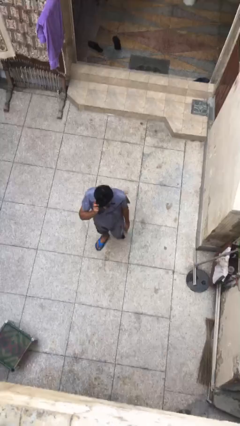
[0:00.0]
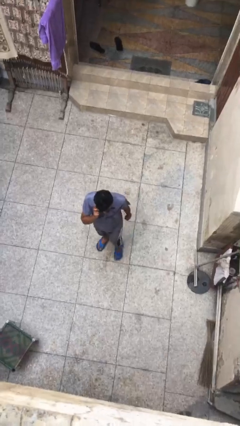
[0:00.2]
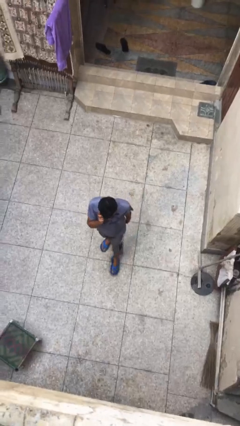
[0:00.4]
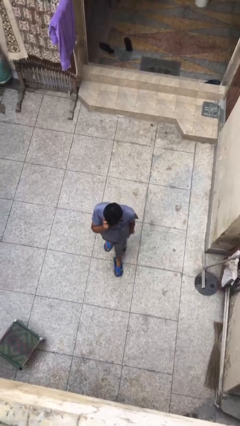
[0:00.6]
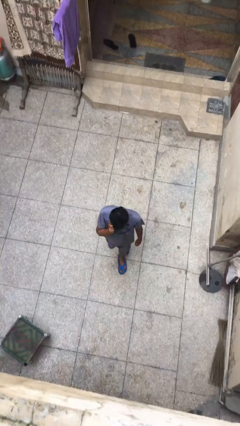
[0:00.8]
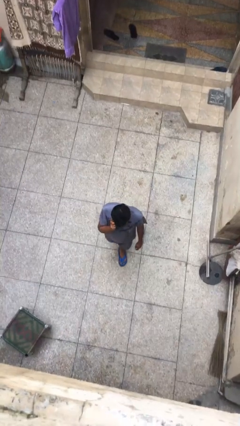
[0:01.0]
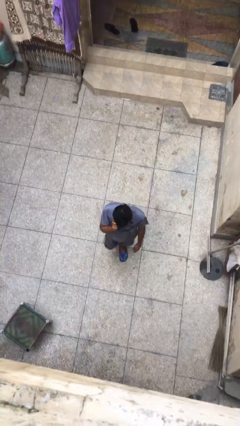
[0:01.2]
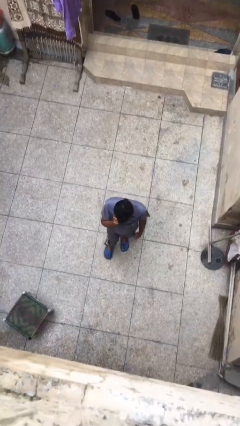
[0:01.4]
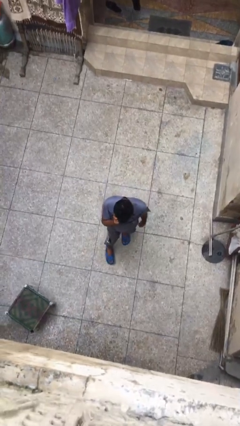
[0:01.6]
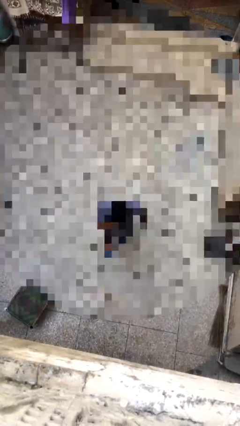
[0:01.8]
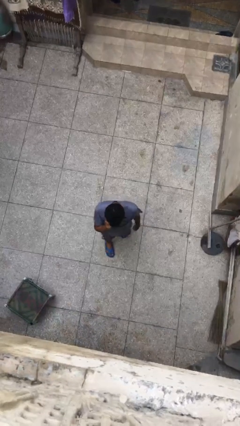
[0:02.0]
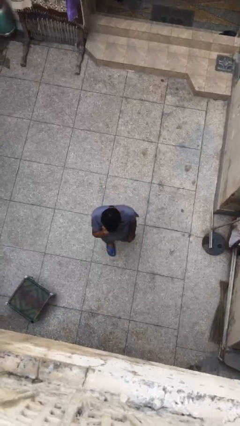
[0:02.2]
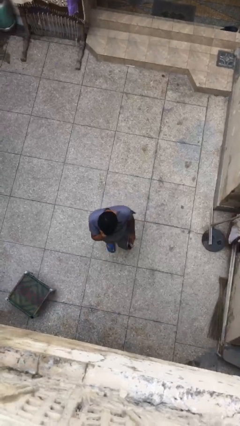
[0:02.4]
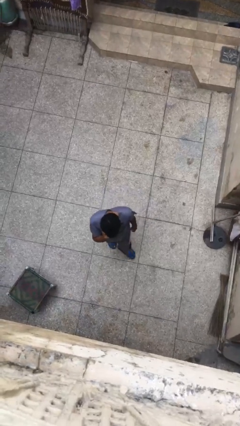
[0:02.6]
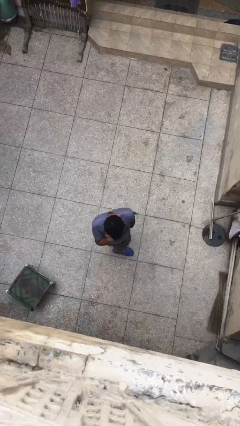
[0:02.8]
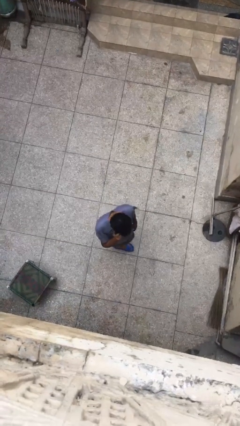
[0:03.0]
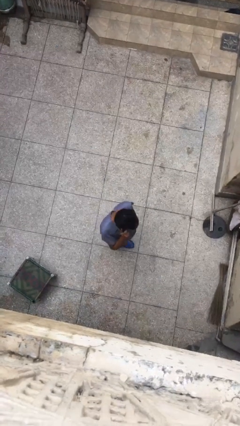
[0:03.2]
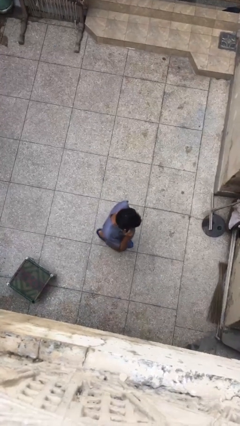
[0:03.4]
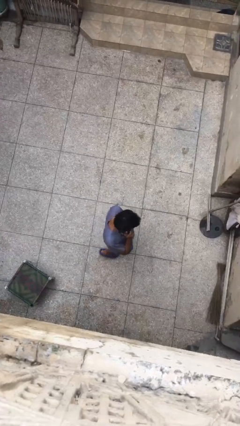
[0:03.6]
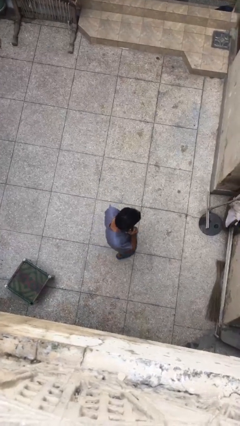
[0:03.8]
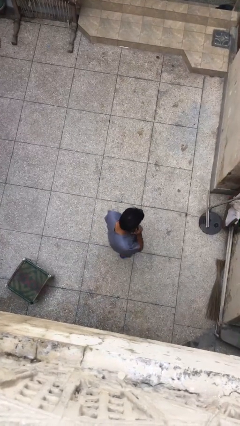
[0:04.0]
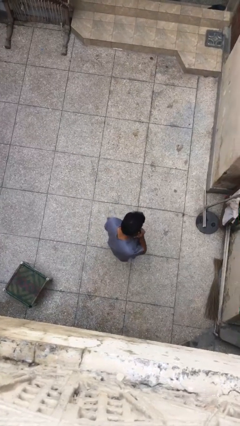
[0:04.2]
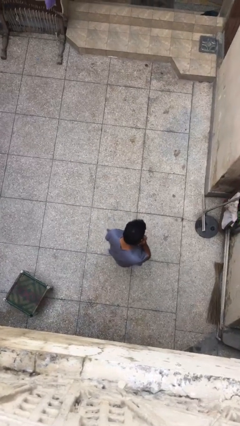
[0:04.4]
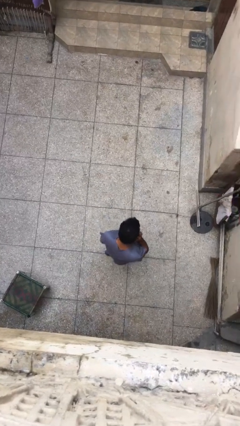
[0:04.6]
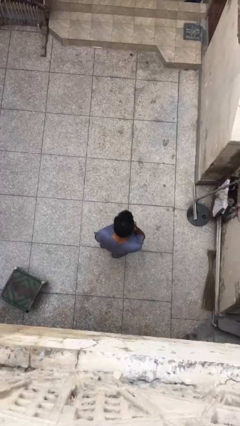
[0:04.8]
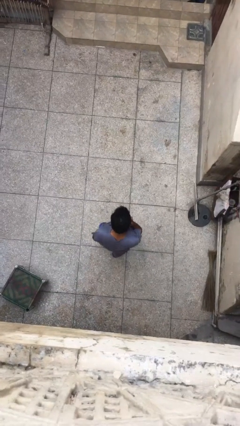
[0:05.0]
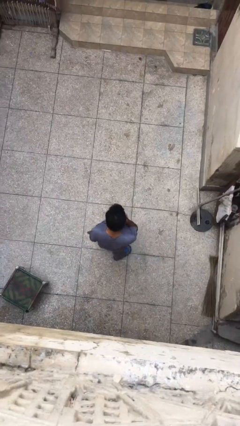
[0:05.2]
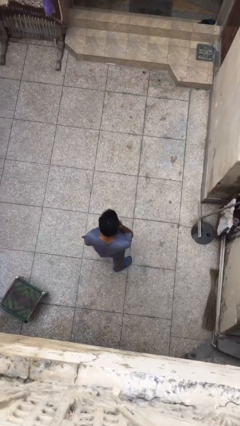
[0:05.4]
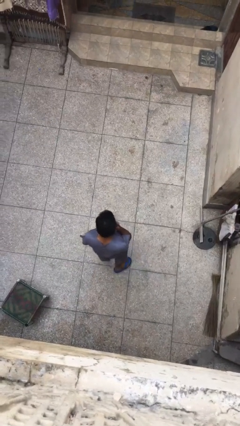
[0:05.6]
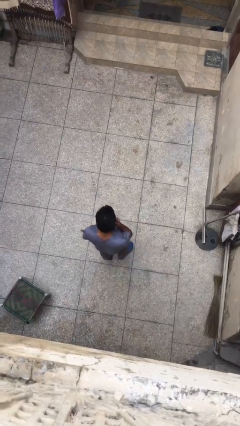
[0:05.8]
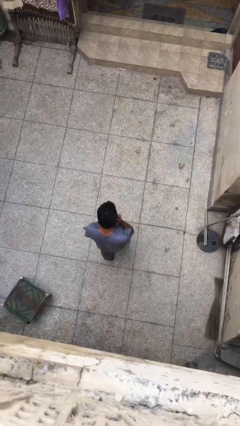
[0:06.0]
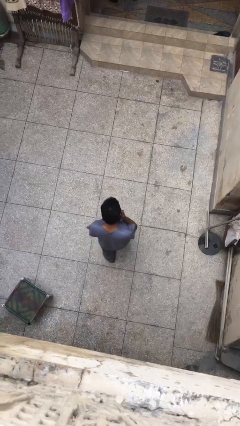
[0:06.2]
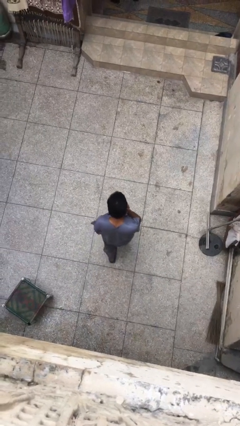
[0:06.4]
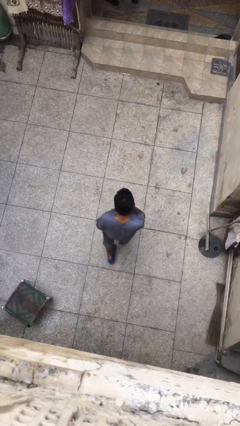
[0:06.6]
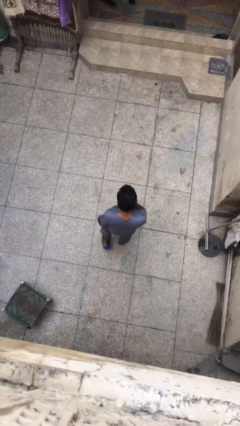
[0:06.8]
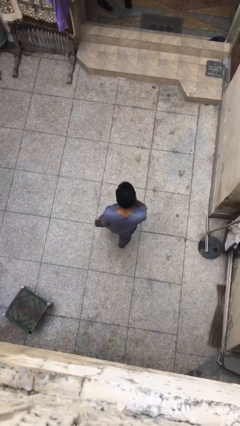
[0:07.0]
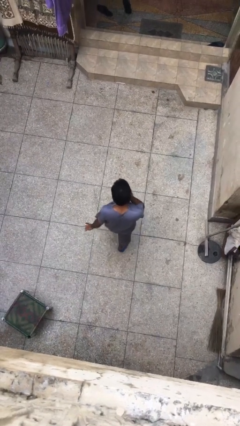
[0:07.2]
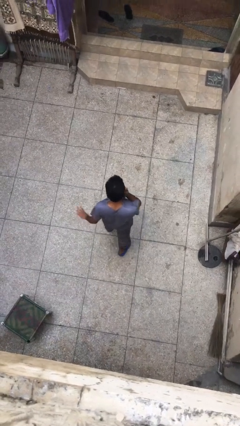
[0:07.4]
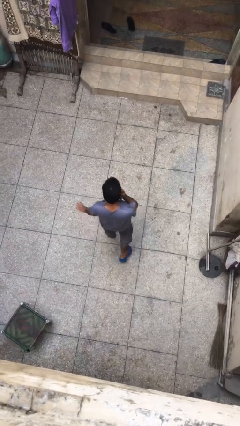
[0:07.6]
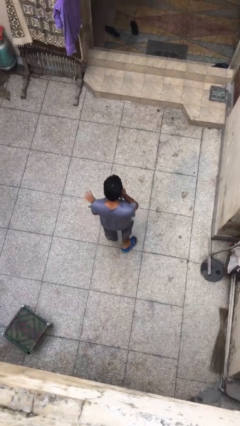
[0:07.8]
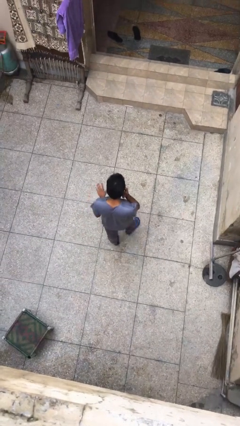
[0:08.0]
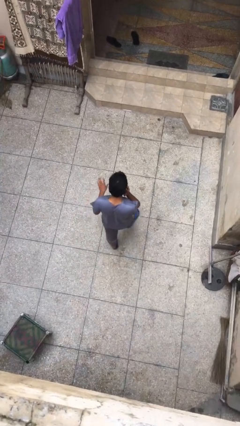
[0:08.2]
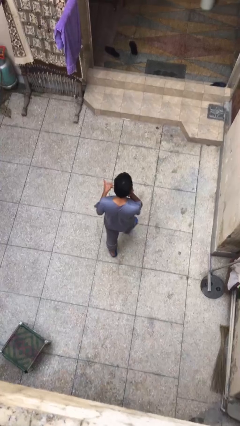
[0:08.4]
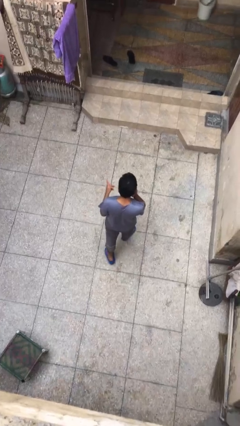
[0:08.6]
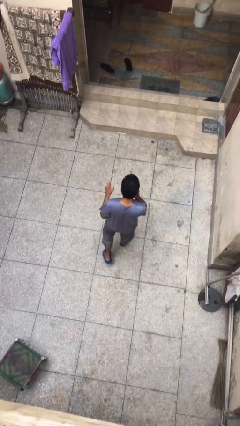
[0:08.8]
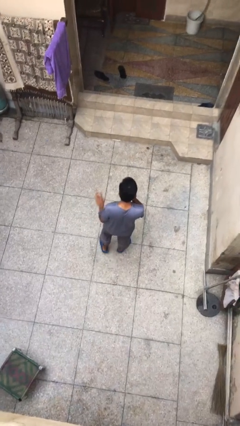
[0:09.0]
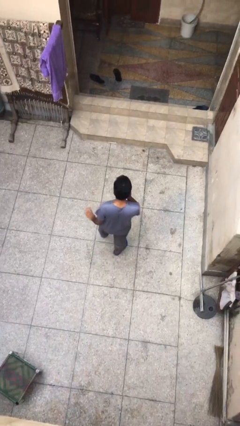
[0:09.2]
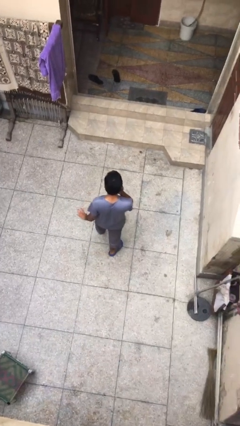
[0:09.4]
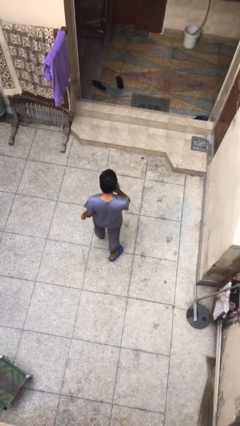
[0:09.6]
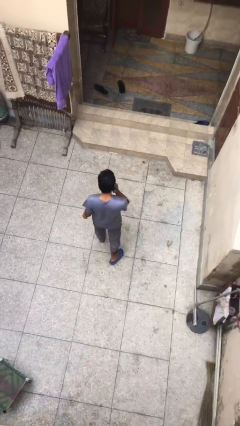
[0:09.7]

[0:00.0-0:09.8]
person talks on phone

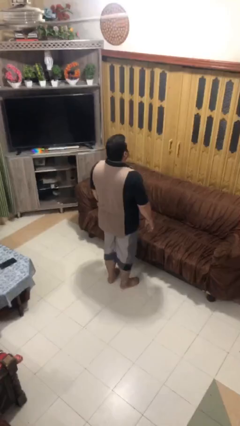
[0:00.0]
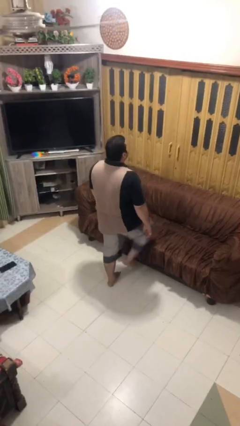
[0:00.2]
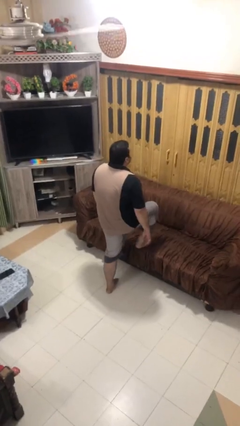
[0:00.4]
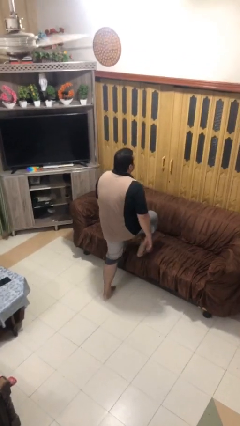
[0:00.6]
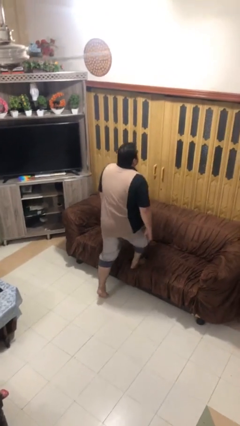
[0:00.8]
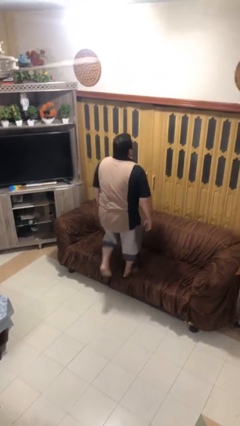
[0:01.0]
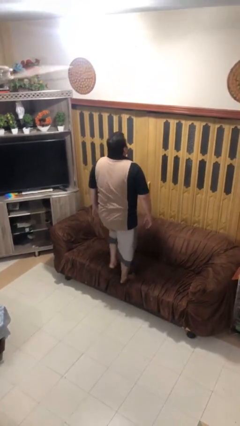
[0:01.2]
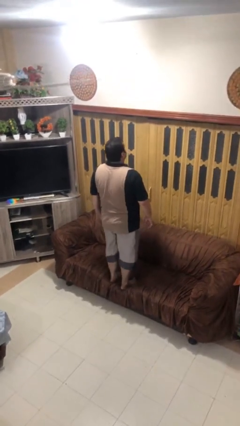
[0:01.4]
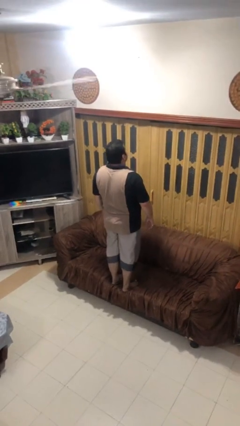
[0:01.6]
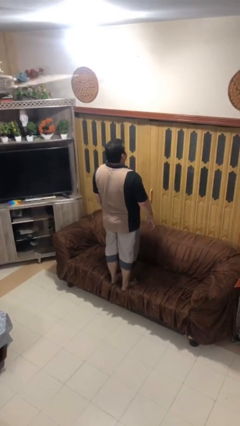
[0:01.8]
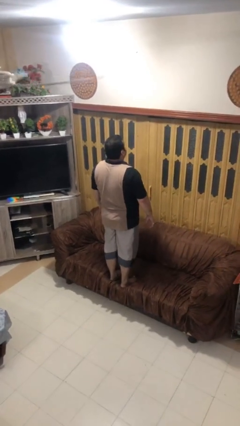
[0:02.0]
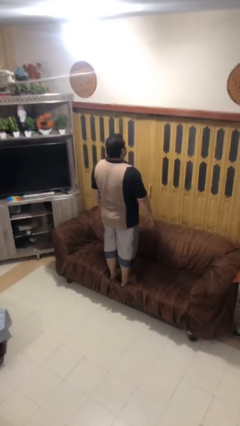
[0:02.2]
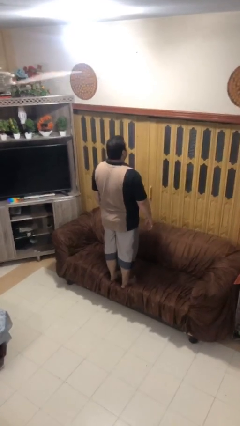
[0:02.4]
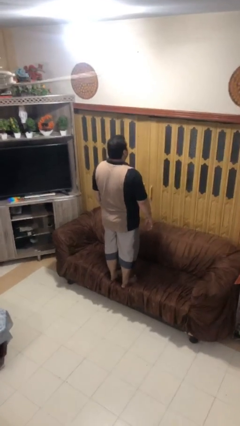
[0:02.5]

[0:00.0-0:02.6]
person climbs on couch

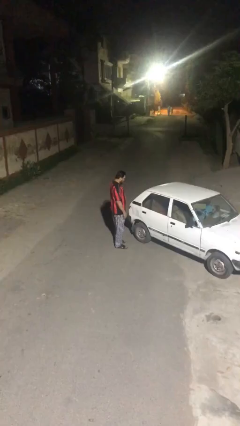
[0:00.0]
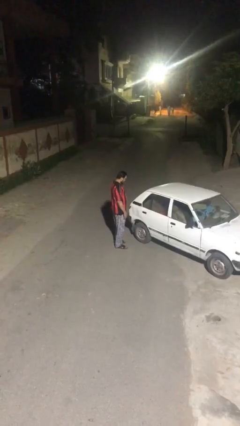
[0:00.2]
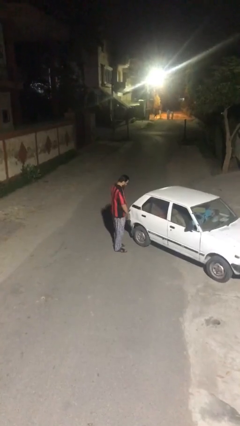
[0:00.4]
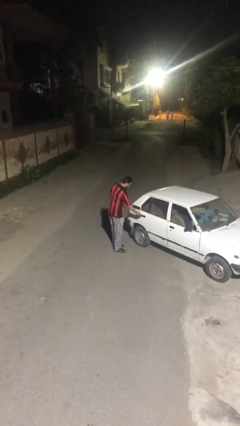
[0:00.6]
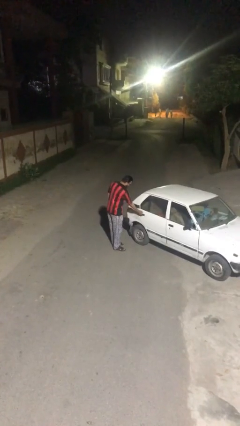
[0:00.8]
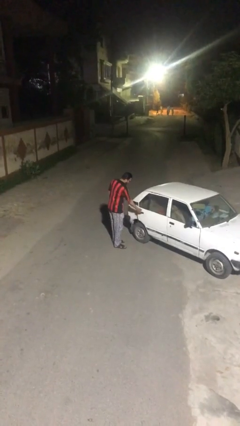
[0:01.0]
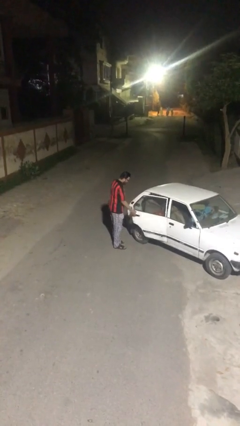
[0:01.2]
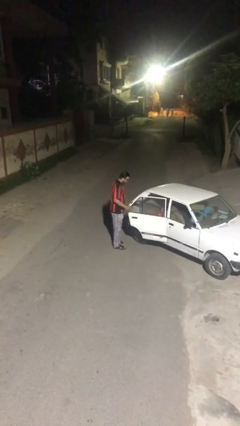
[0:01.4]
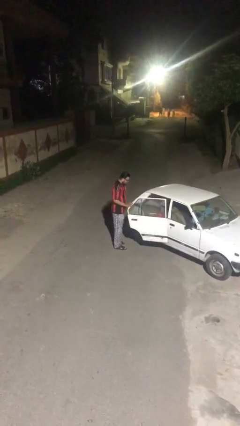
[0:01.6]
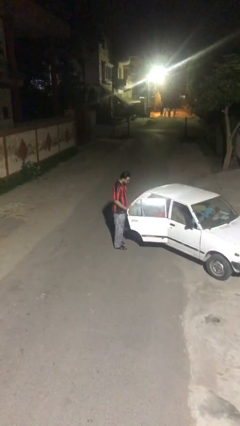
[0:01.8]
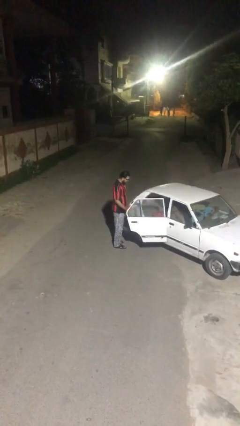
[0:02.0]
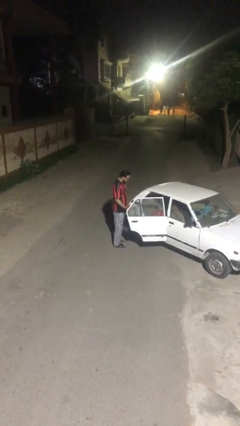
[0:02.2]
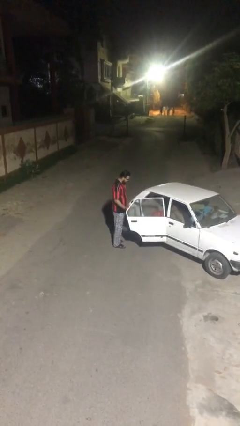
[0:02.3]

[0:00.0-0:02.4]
person opens car door

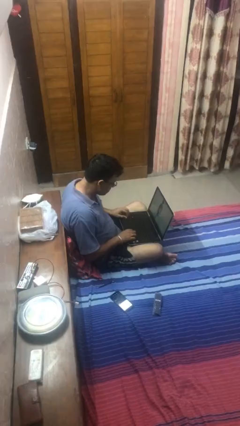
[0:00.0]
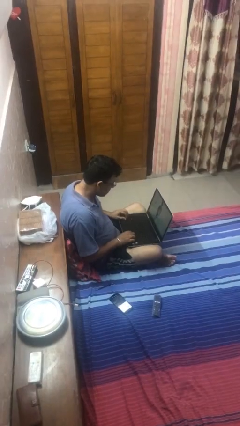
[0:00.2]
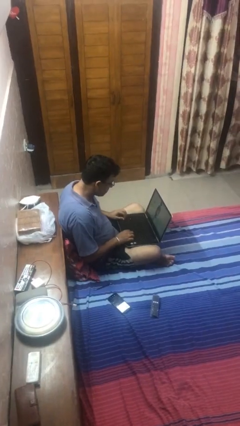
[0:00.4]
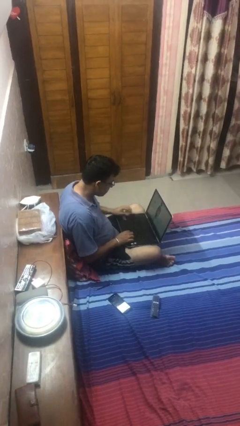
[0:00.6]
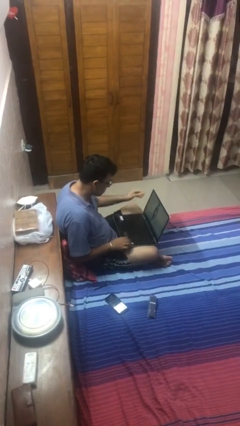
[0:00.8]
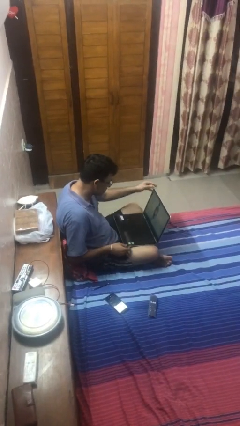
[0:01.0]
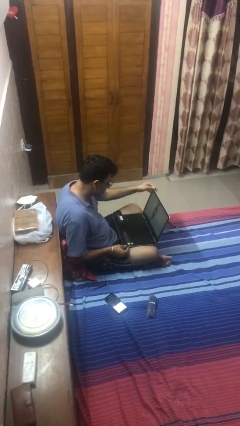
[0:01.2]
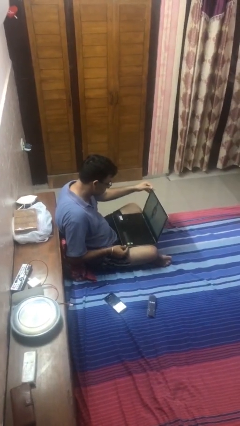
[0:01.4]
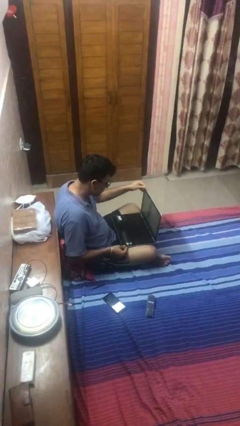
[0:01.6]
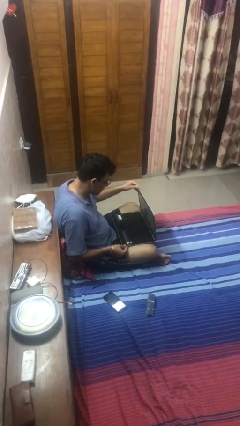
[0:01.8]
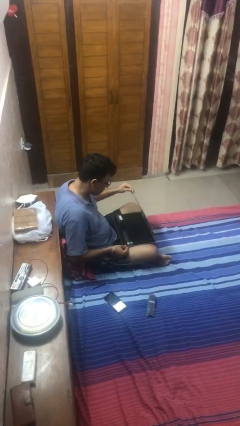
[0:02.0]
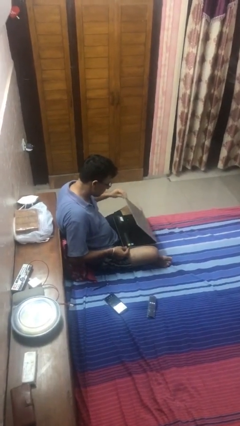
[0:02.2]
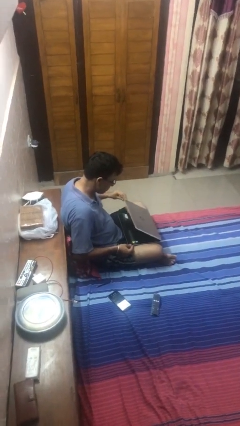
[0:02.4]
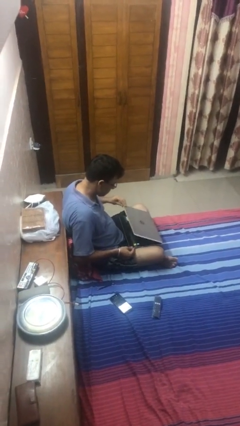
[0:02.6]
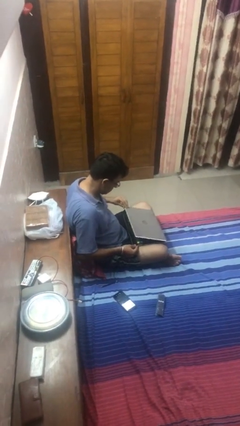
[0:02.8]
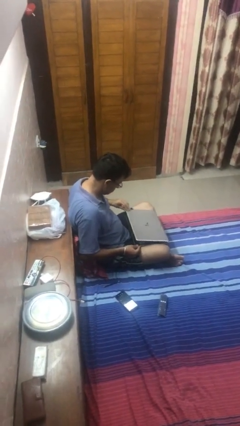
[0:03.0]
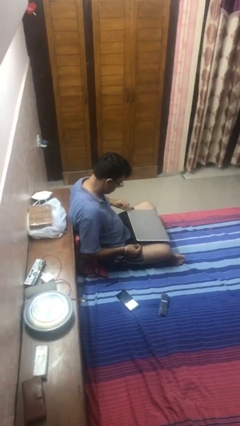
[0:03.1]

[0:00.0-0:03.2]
person closes laptop

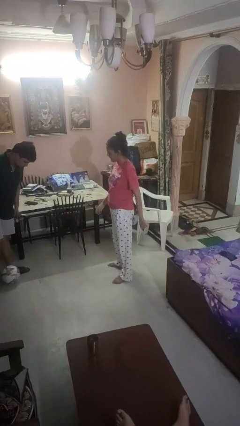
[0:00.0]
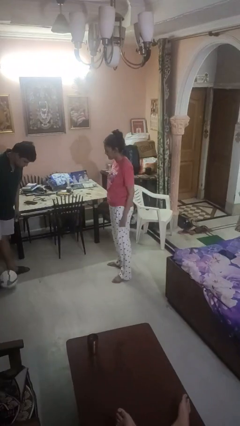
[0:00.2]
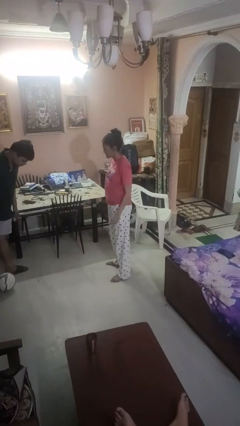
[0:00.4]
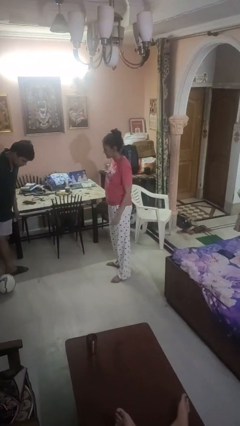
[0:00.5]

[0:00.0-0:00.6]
person kicks object to person
